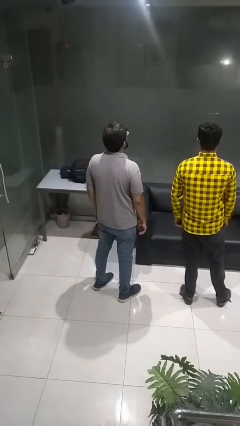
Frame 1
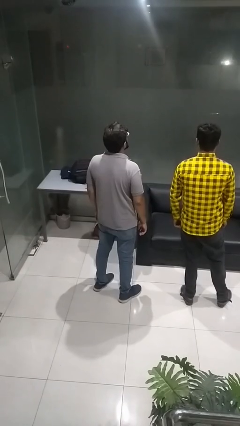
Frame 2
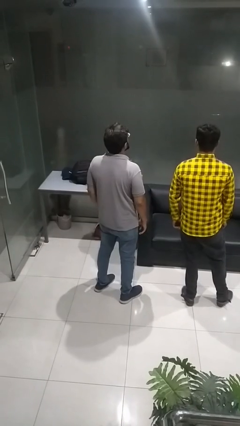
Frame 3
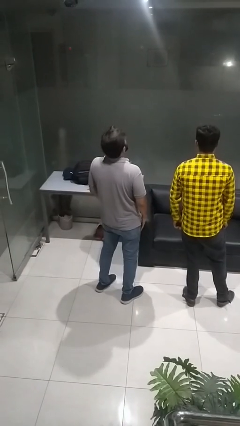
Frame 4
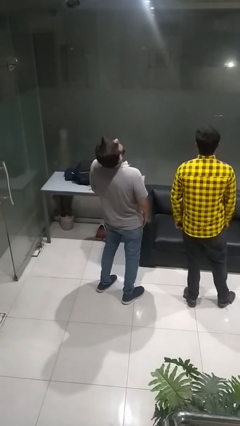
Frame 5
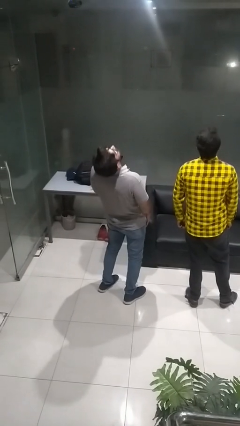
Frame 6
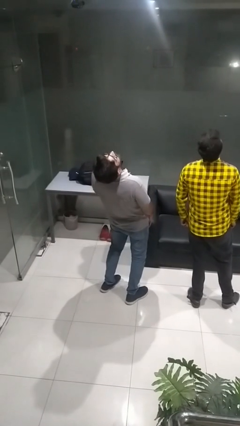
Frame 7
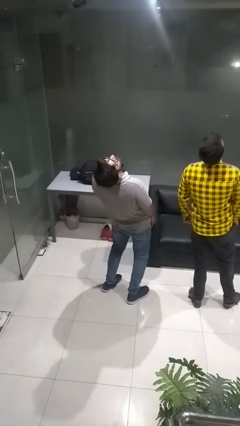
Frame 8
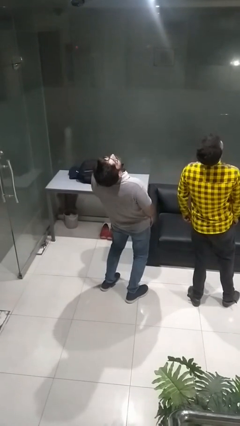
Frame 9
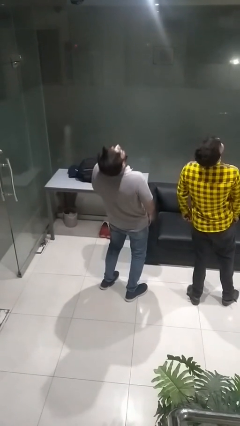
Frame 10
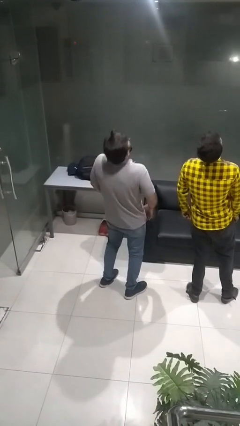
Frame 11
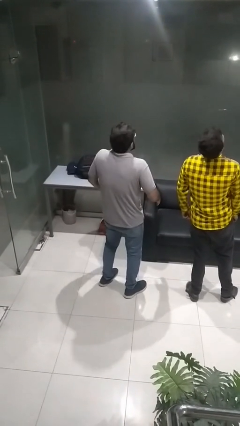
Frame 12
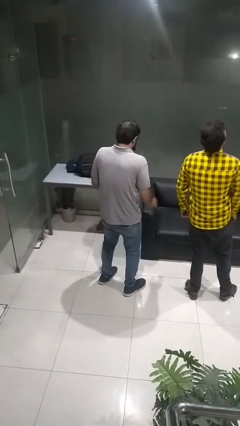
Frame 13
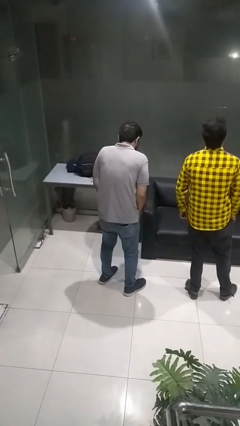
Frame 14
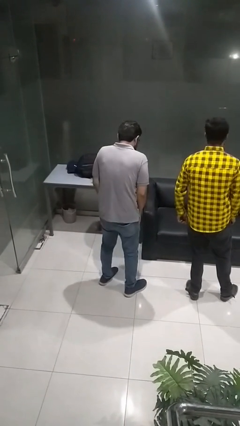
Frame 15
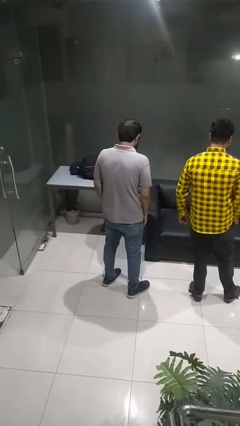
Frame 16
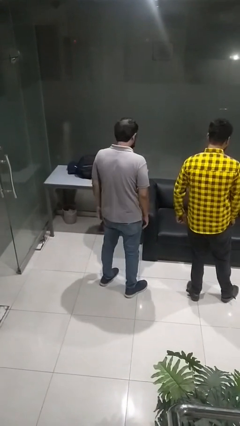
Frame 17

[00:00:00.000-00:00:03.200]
person laughs with person

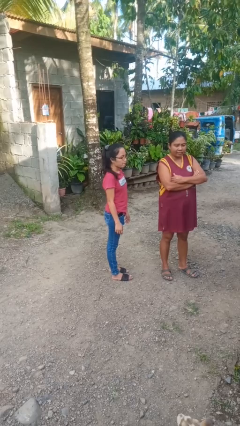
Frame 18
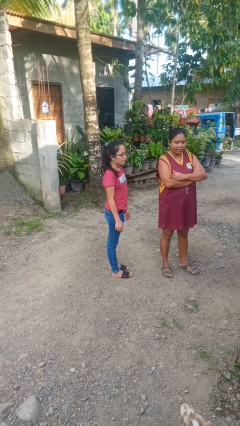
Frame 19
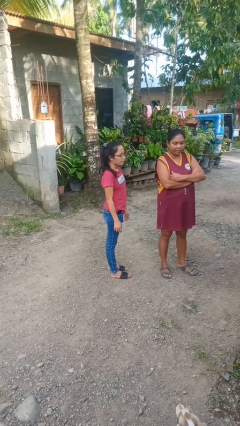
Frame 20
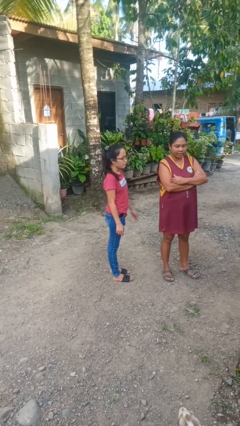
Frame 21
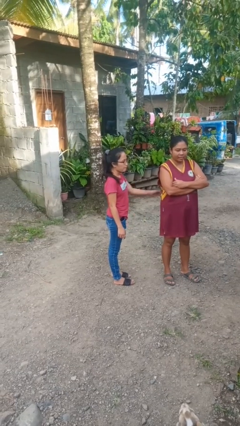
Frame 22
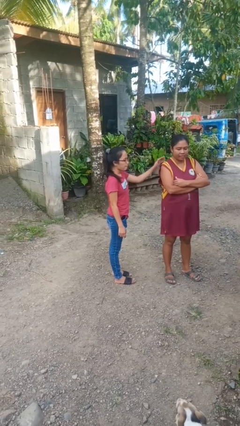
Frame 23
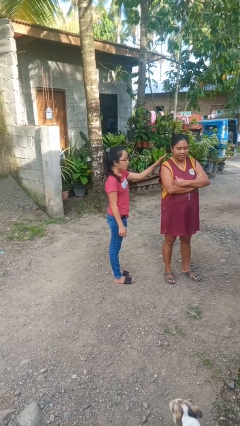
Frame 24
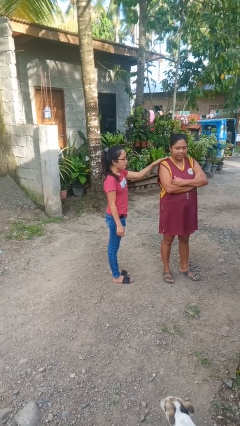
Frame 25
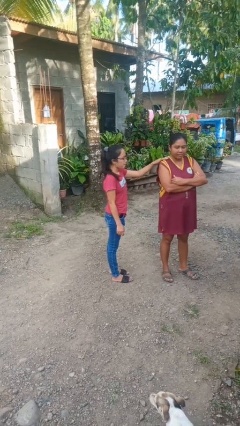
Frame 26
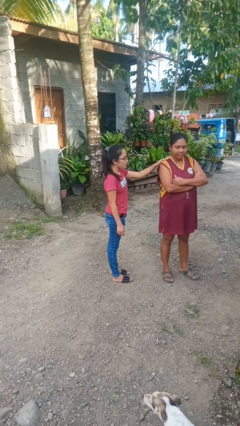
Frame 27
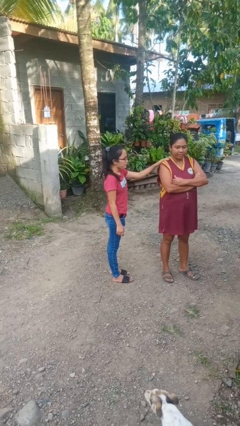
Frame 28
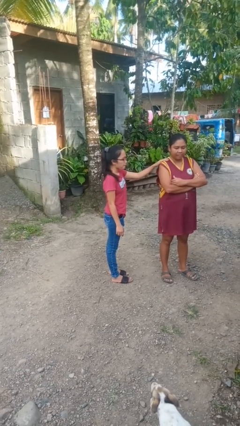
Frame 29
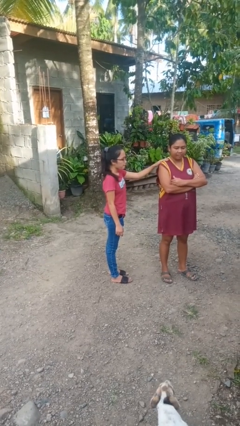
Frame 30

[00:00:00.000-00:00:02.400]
person pounds shoulders of person

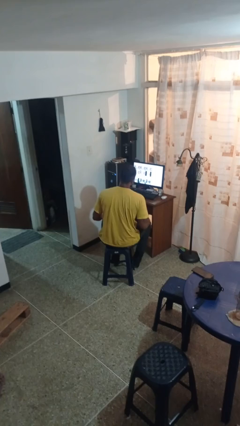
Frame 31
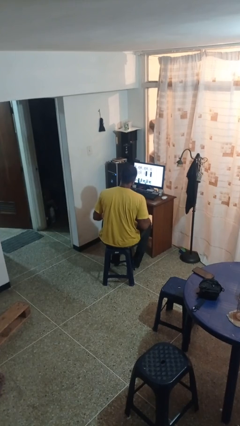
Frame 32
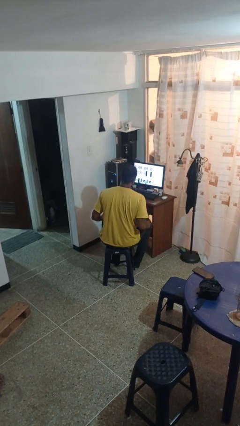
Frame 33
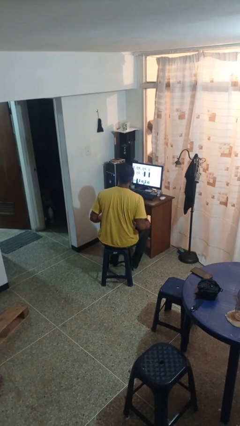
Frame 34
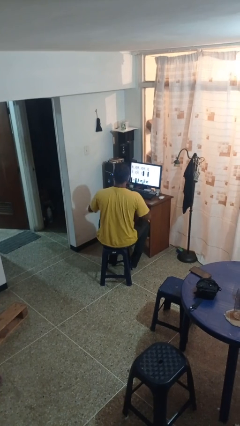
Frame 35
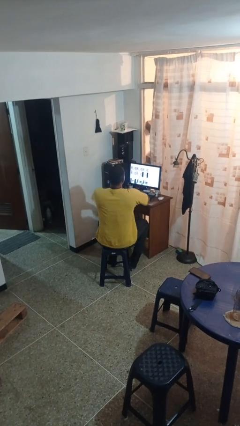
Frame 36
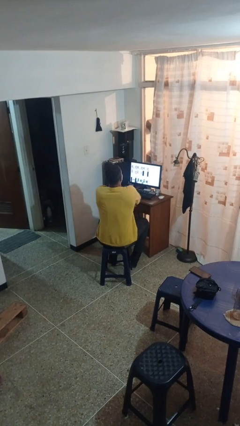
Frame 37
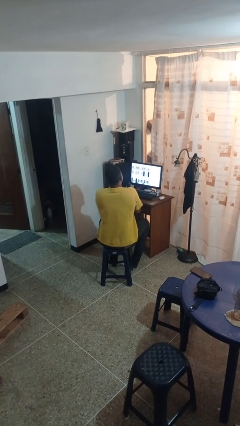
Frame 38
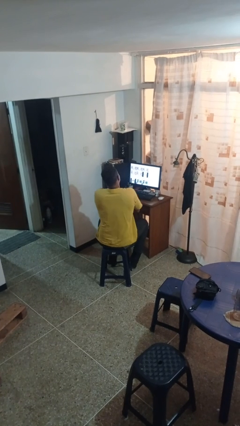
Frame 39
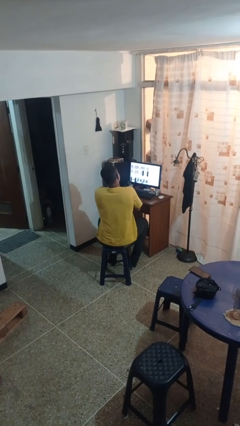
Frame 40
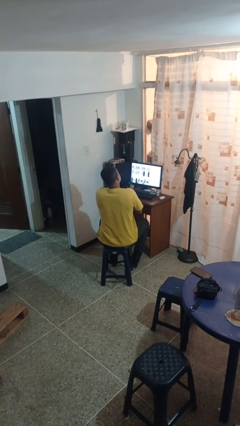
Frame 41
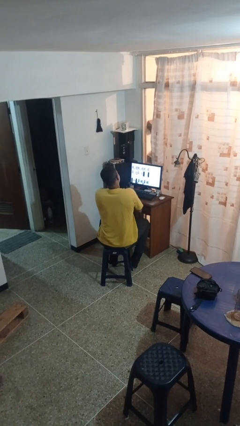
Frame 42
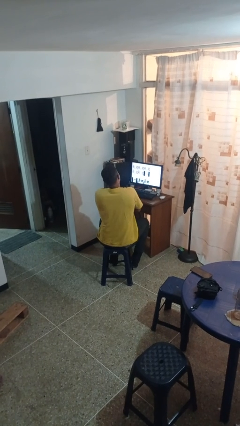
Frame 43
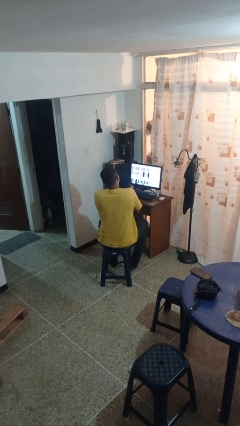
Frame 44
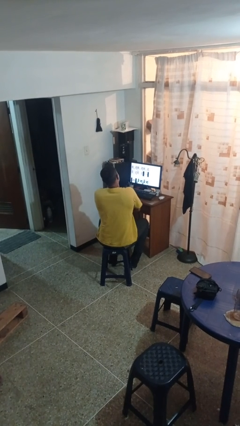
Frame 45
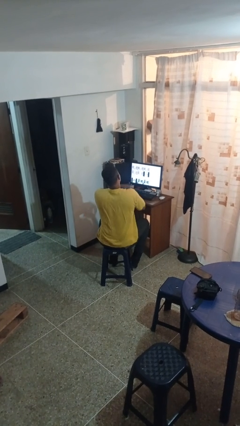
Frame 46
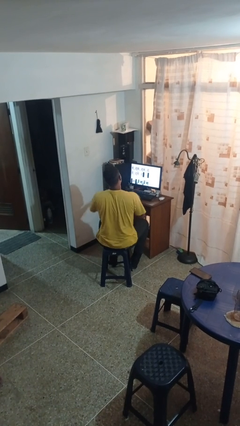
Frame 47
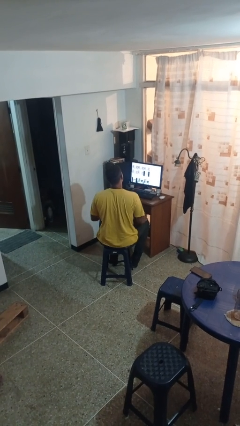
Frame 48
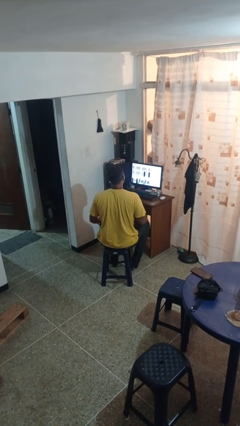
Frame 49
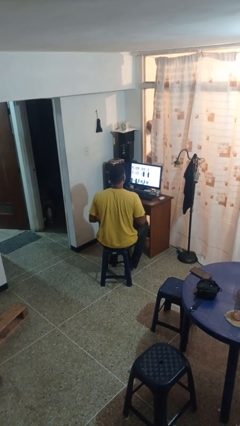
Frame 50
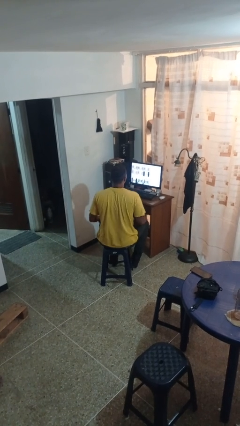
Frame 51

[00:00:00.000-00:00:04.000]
person crosses arms

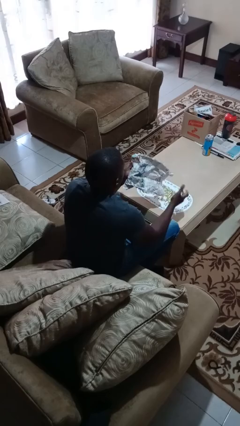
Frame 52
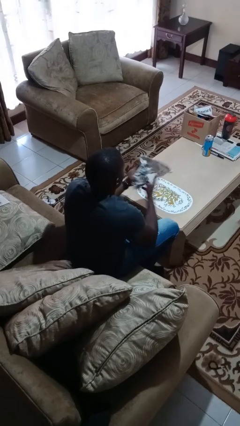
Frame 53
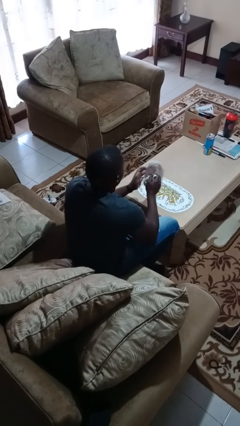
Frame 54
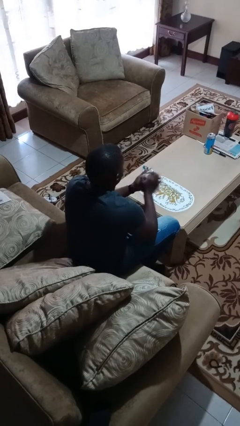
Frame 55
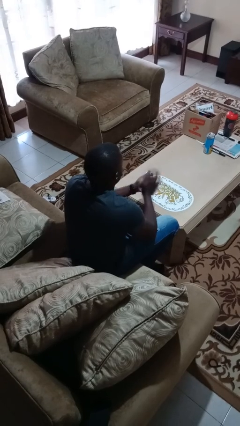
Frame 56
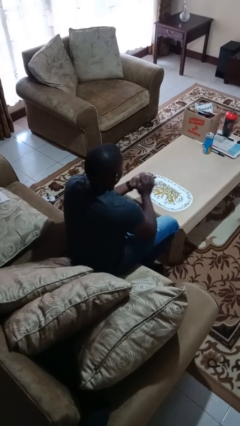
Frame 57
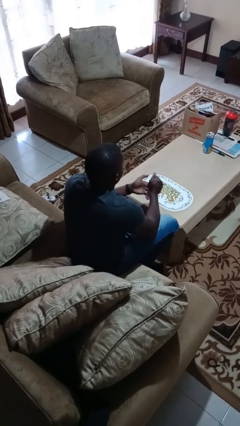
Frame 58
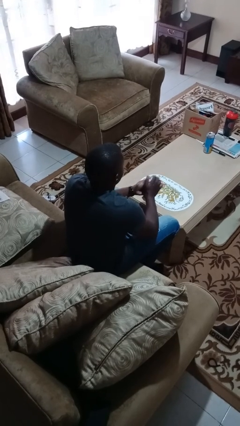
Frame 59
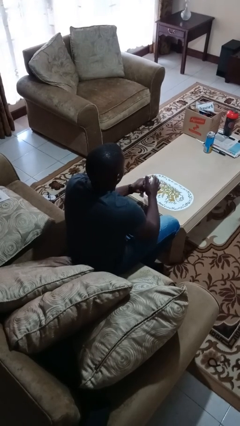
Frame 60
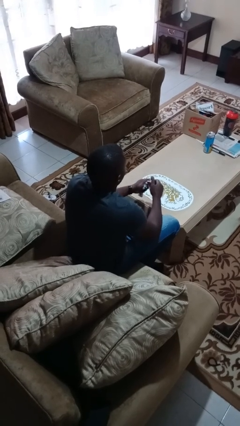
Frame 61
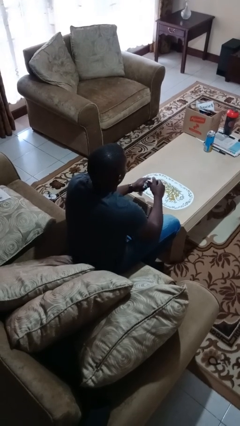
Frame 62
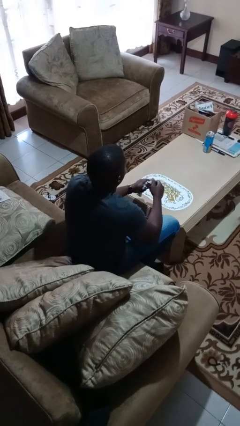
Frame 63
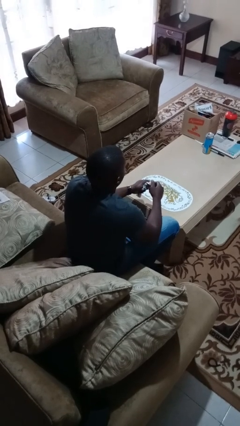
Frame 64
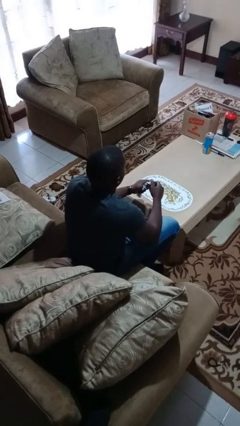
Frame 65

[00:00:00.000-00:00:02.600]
person crumples paper

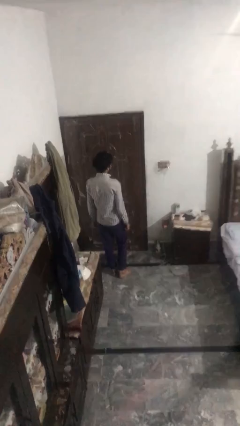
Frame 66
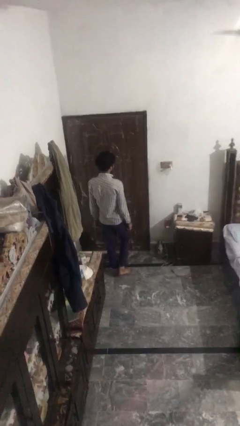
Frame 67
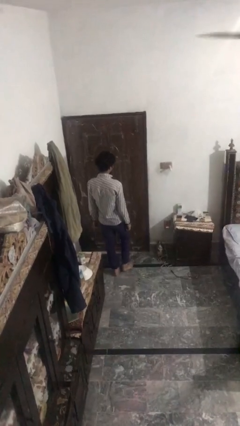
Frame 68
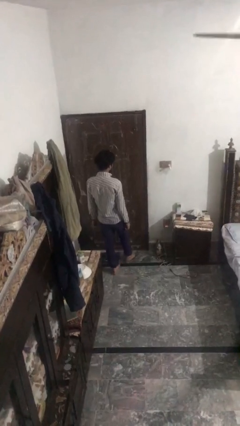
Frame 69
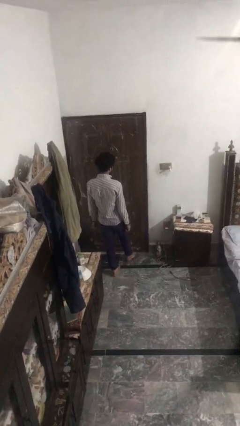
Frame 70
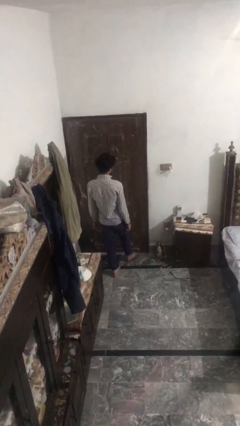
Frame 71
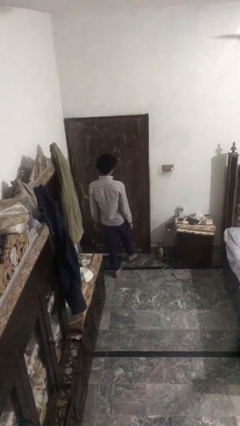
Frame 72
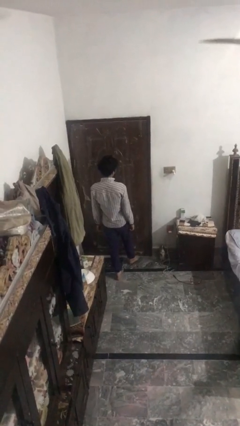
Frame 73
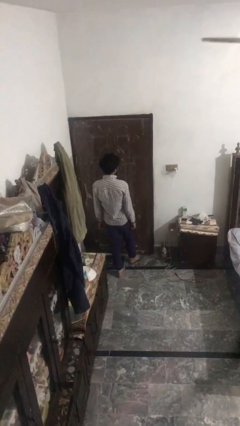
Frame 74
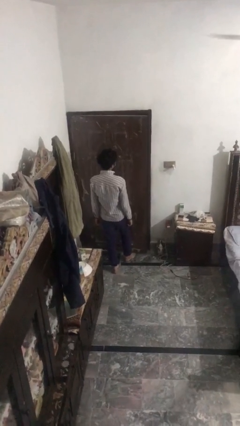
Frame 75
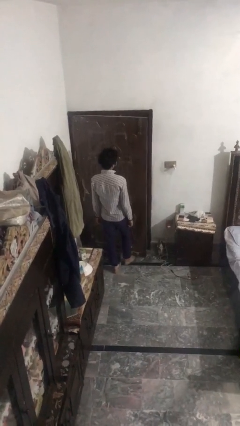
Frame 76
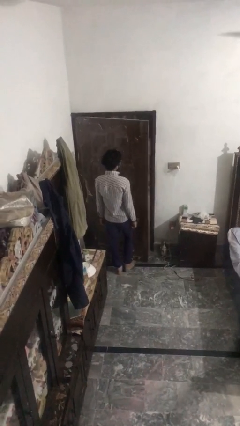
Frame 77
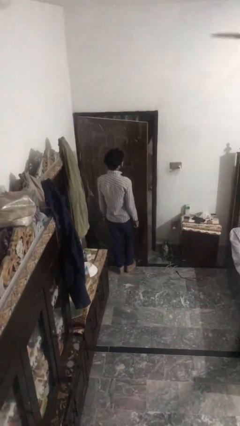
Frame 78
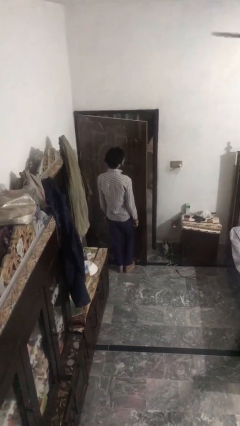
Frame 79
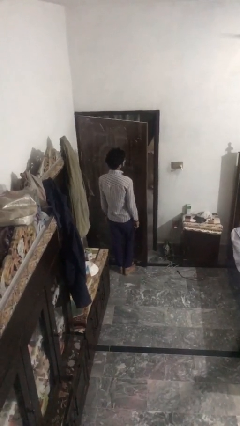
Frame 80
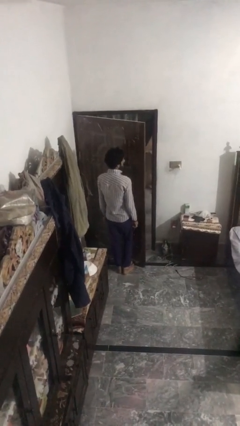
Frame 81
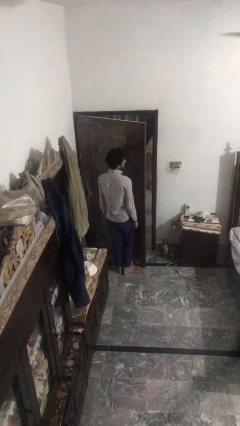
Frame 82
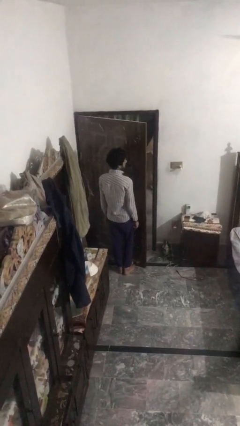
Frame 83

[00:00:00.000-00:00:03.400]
person opens facility door

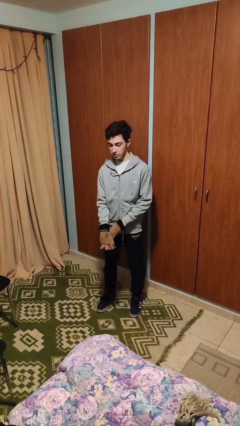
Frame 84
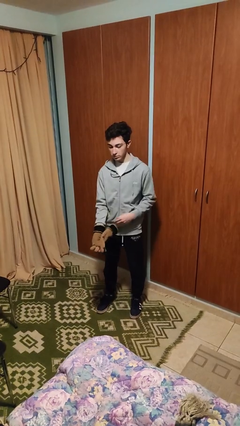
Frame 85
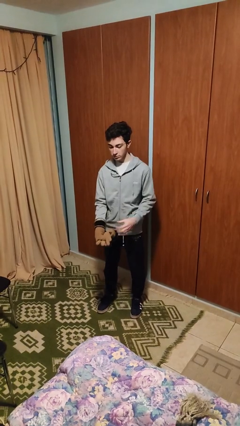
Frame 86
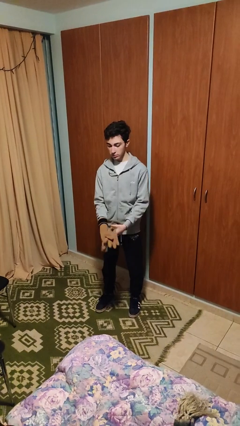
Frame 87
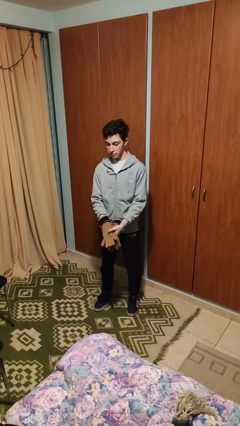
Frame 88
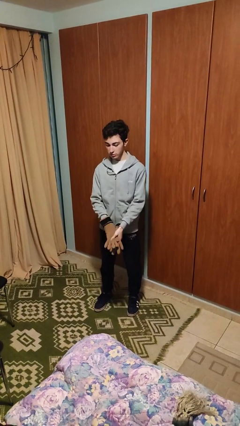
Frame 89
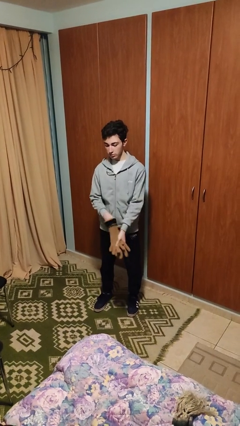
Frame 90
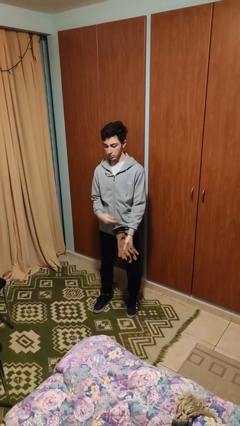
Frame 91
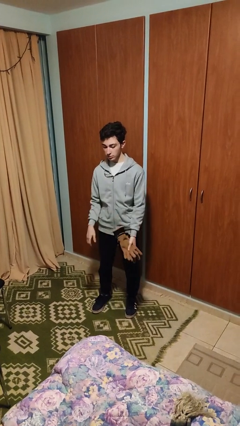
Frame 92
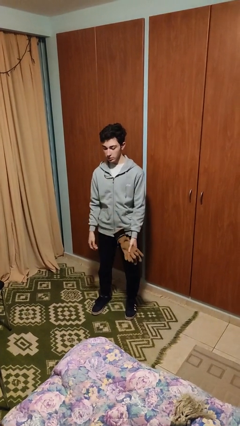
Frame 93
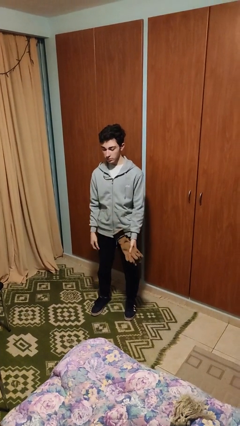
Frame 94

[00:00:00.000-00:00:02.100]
person takes off gloves
